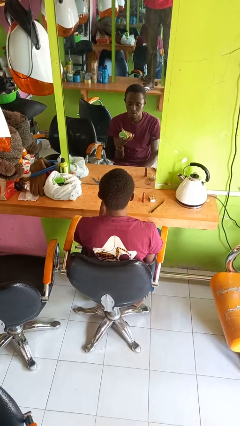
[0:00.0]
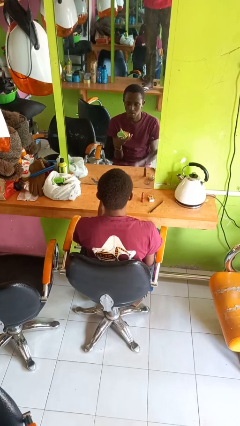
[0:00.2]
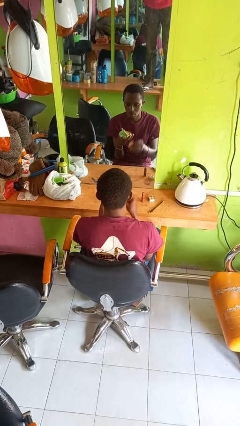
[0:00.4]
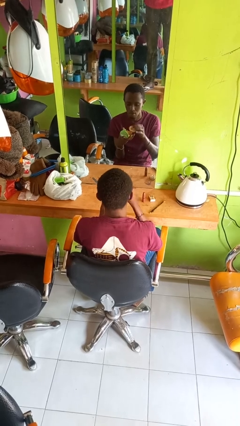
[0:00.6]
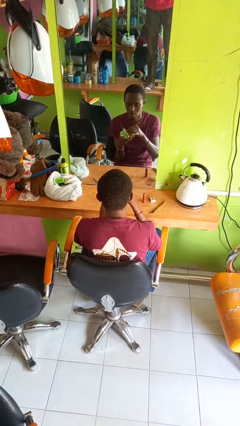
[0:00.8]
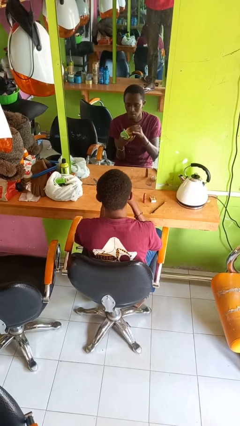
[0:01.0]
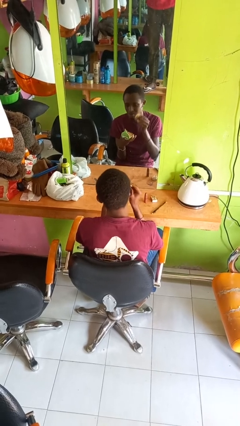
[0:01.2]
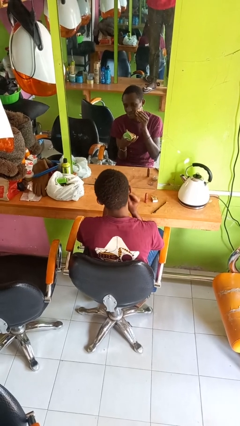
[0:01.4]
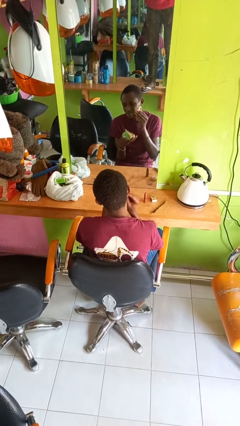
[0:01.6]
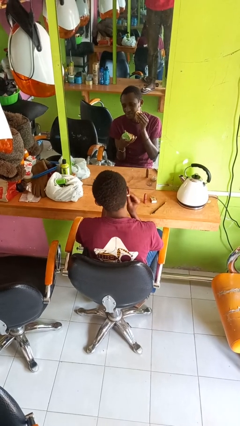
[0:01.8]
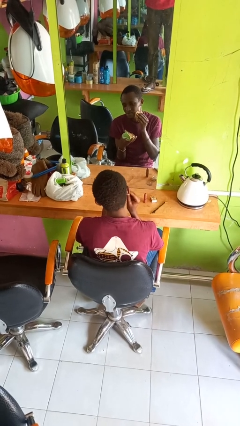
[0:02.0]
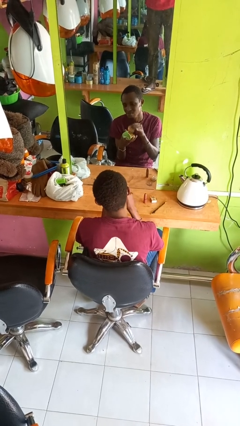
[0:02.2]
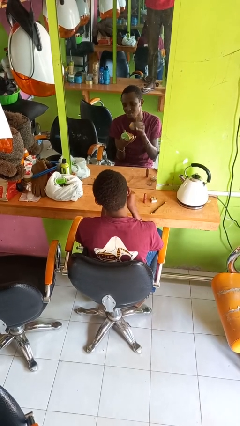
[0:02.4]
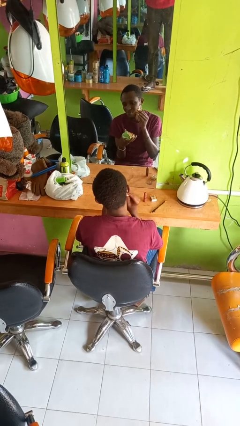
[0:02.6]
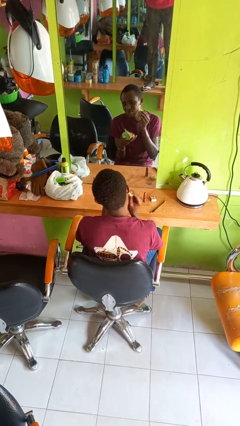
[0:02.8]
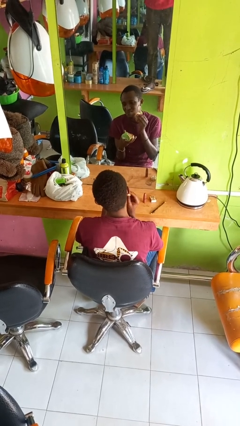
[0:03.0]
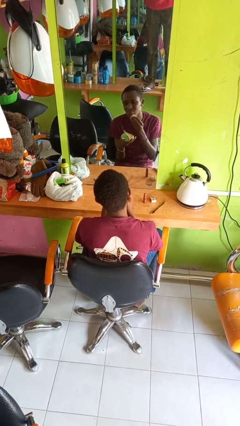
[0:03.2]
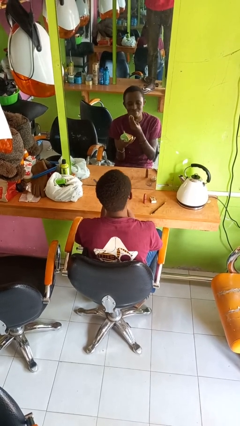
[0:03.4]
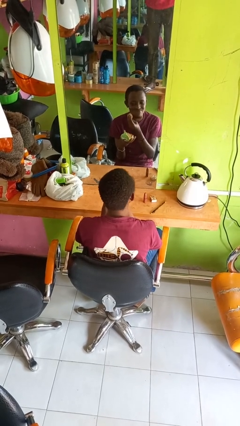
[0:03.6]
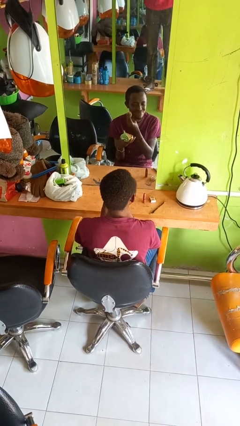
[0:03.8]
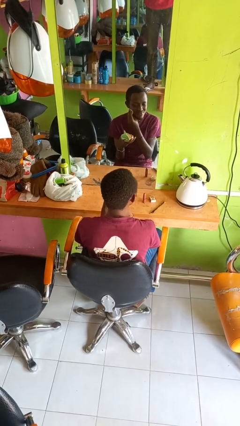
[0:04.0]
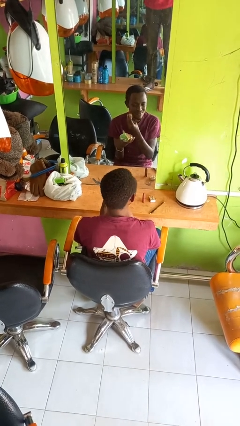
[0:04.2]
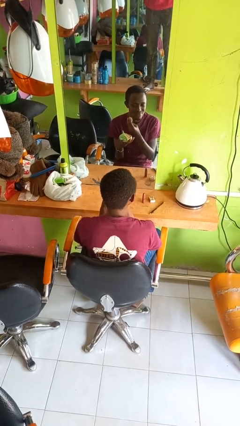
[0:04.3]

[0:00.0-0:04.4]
person applies foundation makeup

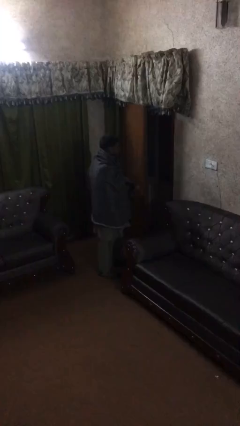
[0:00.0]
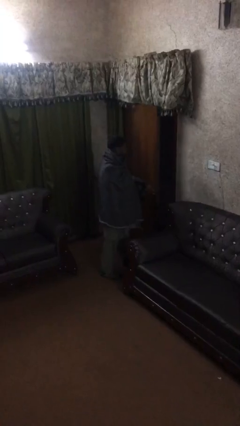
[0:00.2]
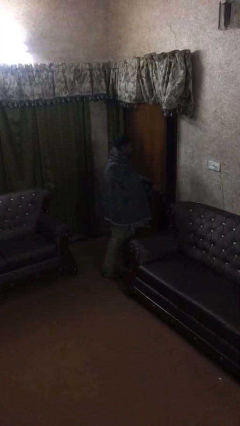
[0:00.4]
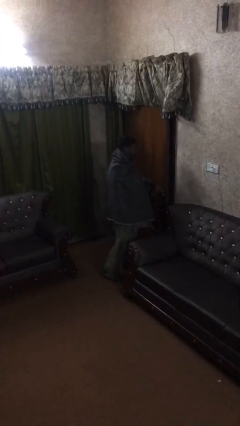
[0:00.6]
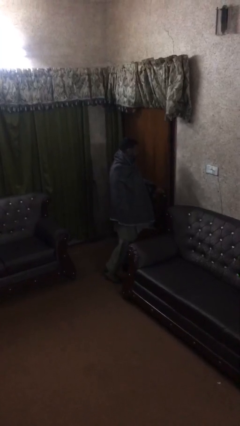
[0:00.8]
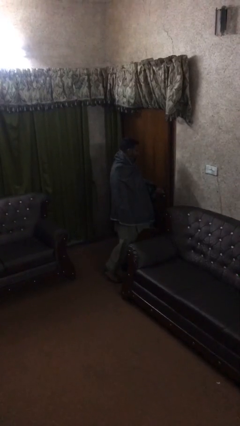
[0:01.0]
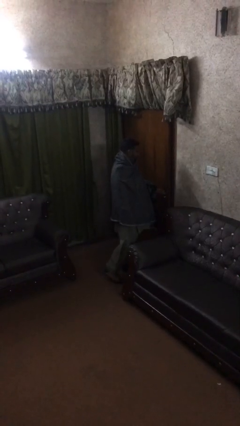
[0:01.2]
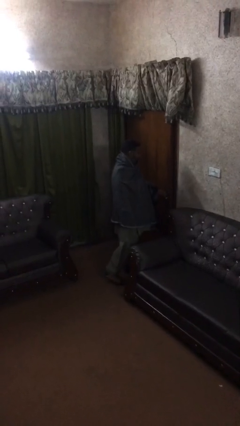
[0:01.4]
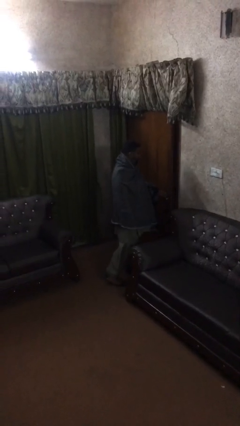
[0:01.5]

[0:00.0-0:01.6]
person closes facility door

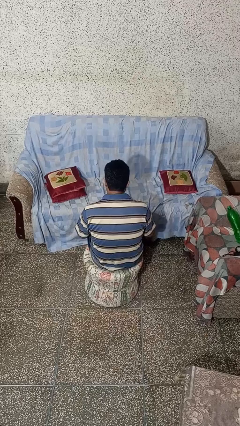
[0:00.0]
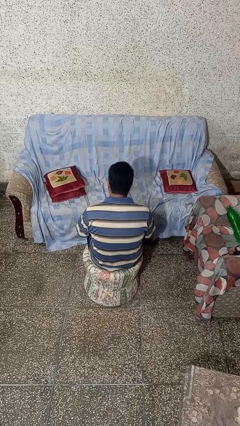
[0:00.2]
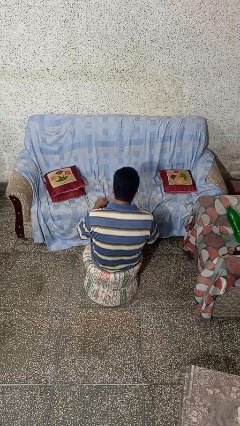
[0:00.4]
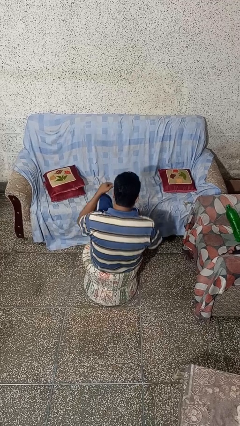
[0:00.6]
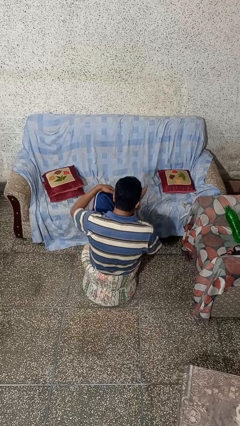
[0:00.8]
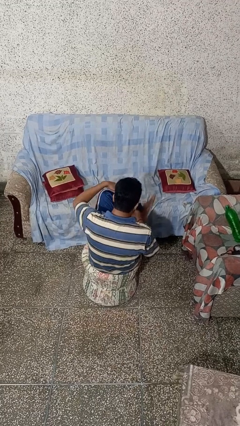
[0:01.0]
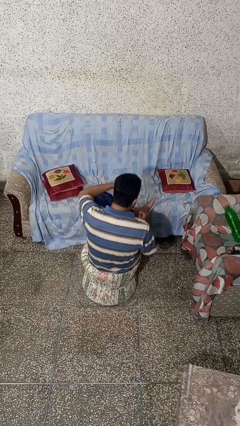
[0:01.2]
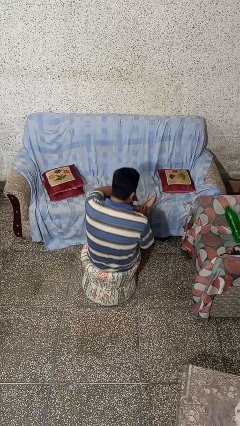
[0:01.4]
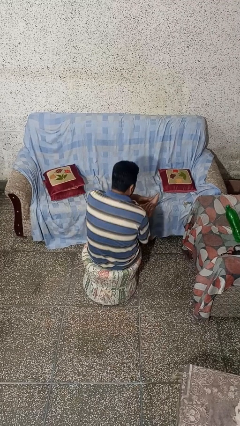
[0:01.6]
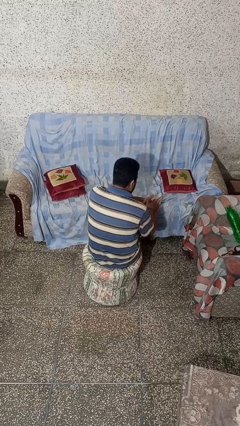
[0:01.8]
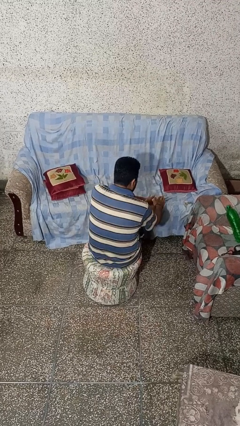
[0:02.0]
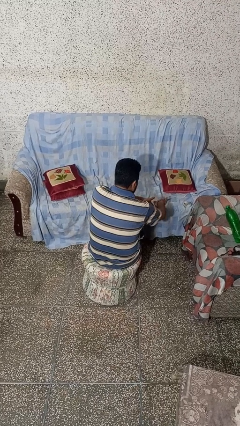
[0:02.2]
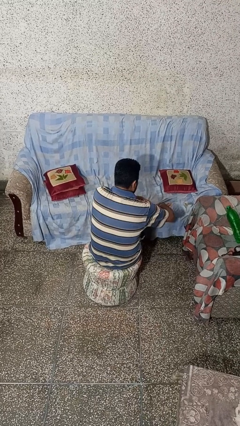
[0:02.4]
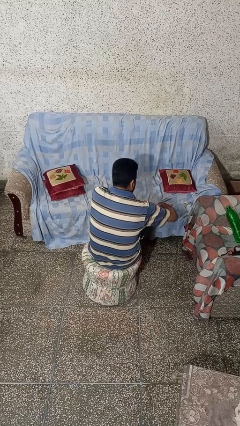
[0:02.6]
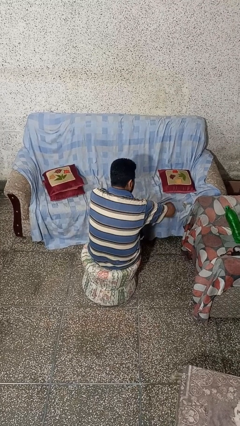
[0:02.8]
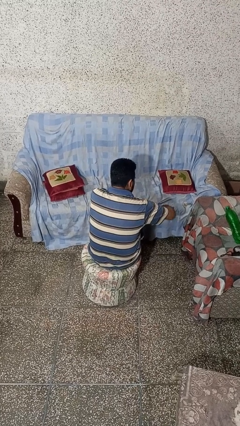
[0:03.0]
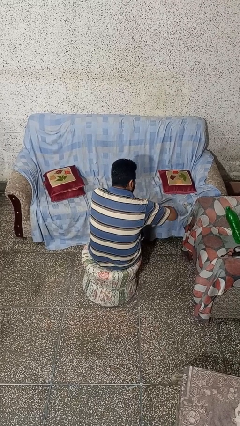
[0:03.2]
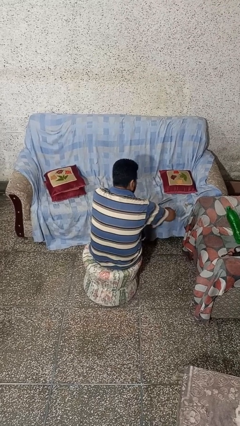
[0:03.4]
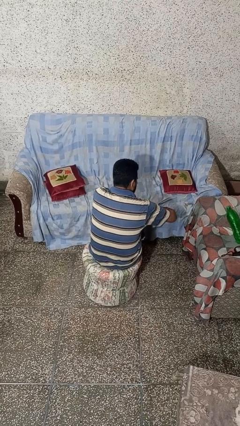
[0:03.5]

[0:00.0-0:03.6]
person rubs foot

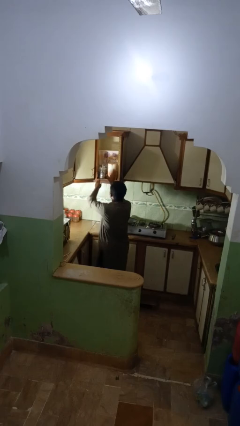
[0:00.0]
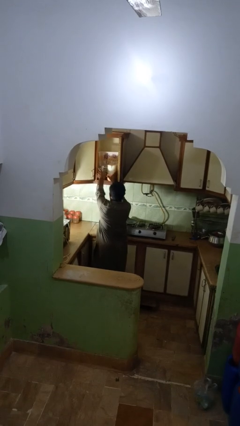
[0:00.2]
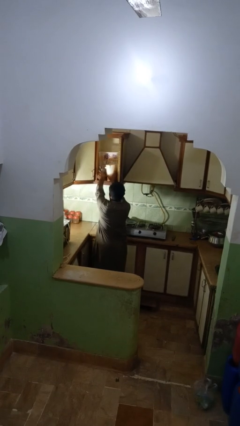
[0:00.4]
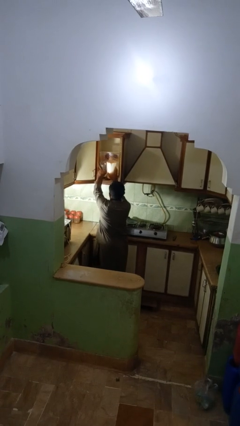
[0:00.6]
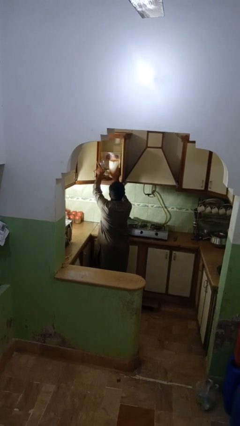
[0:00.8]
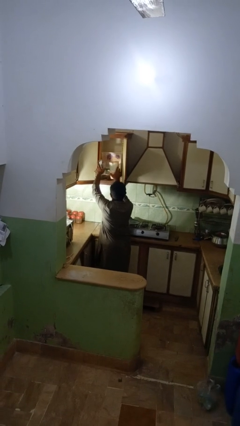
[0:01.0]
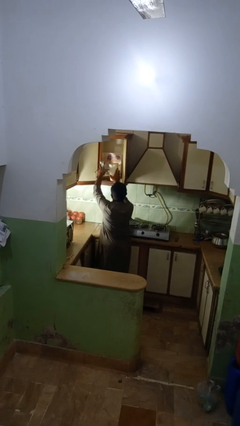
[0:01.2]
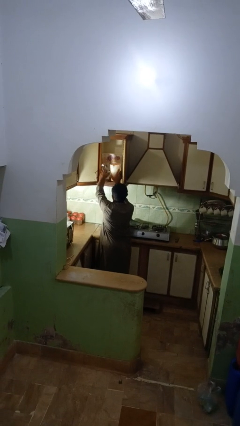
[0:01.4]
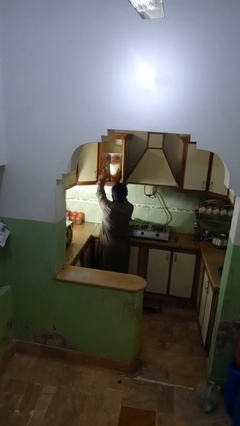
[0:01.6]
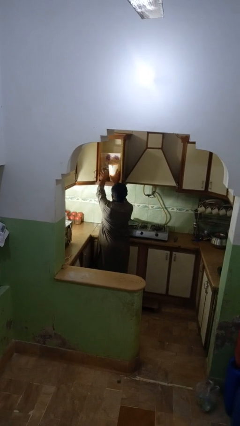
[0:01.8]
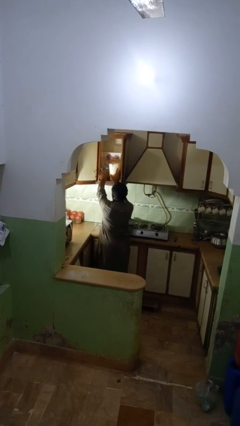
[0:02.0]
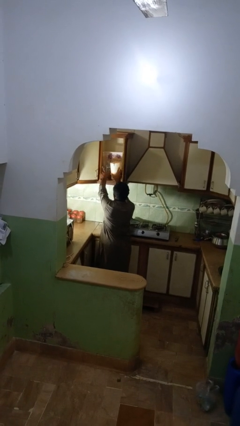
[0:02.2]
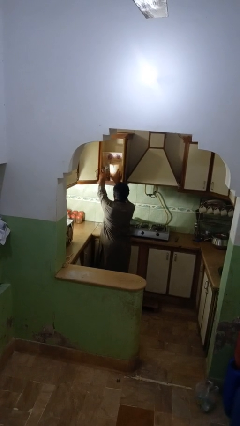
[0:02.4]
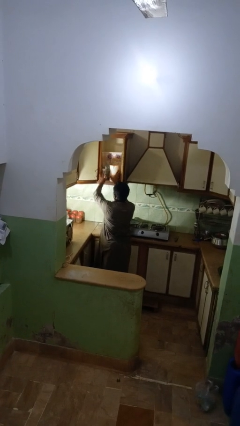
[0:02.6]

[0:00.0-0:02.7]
person searches in kitchen drawer

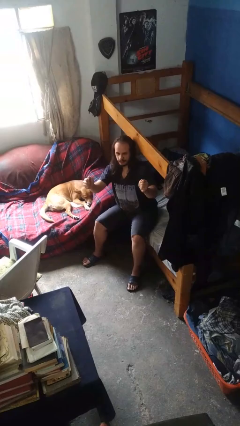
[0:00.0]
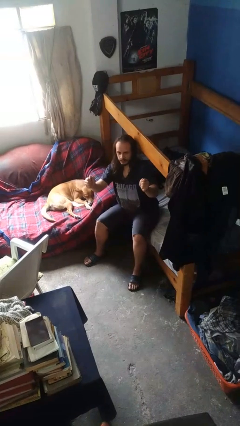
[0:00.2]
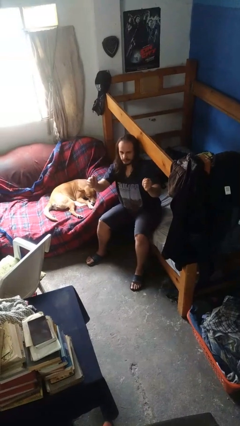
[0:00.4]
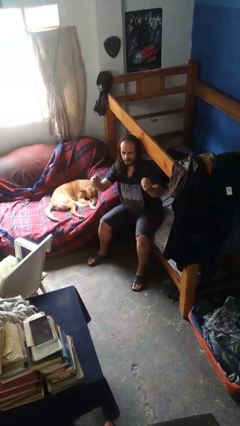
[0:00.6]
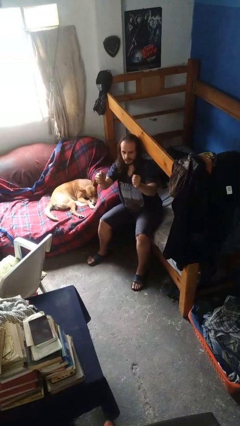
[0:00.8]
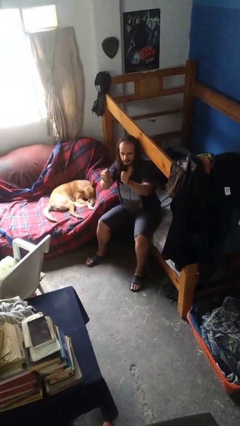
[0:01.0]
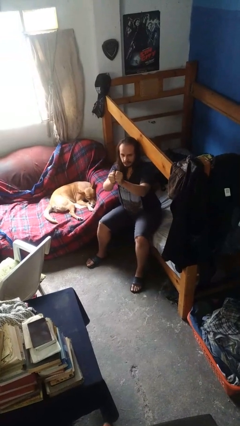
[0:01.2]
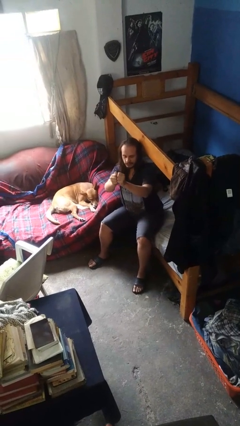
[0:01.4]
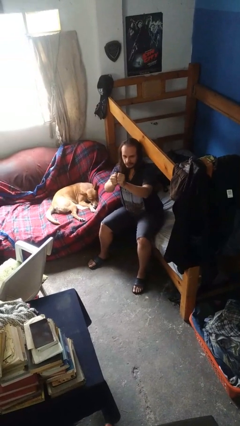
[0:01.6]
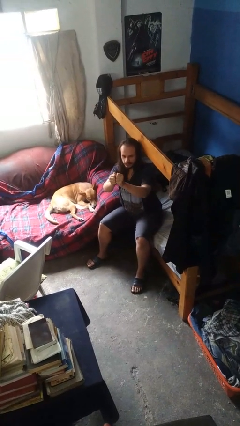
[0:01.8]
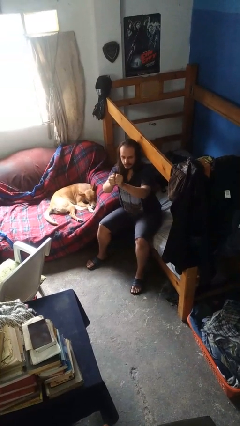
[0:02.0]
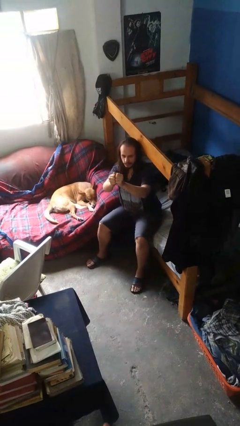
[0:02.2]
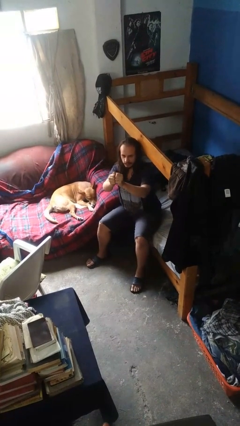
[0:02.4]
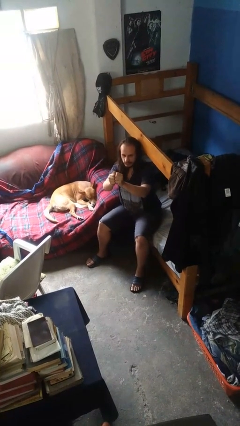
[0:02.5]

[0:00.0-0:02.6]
person gestures zoom out

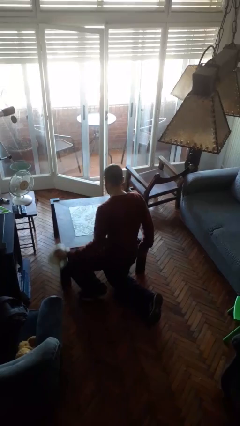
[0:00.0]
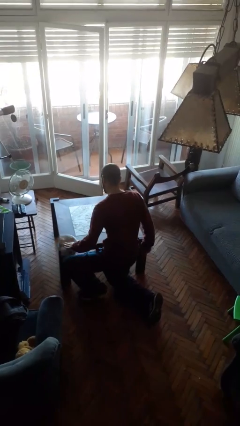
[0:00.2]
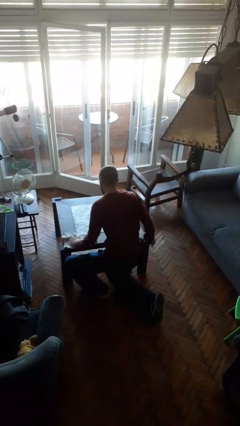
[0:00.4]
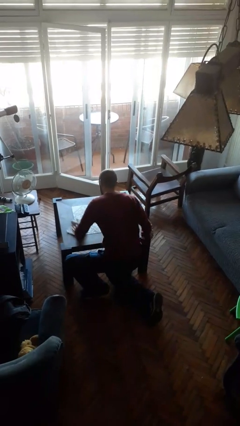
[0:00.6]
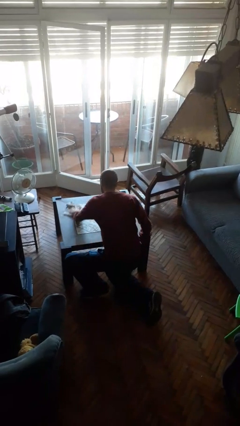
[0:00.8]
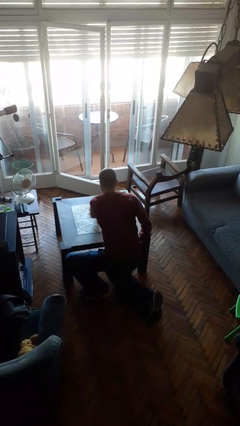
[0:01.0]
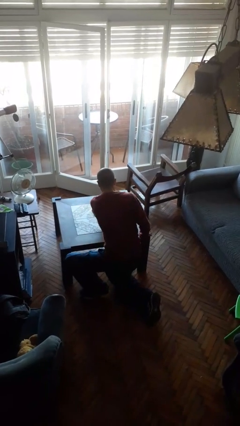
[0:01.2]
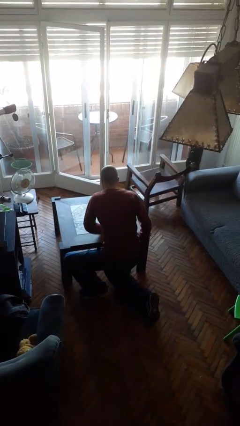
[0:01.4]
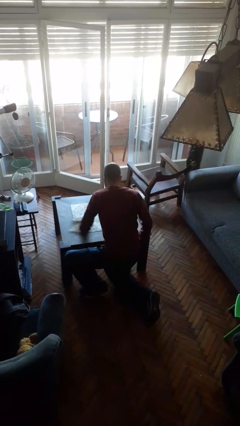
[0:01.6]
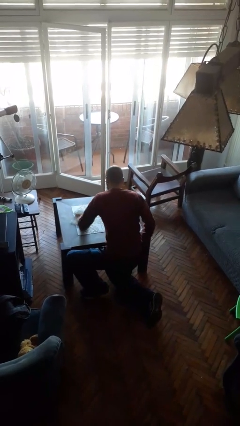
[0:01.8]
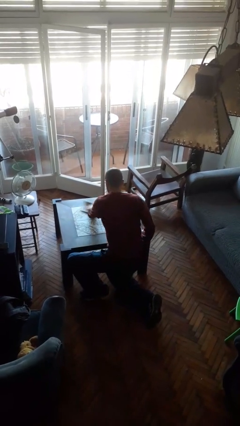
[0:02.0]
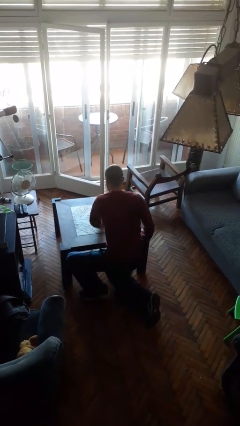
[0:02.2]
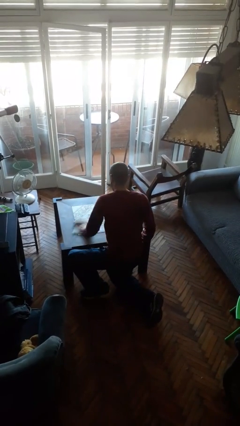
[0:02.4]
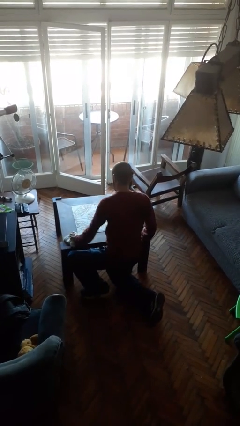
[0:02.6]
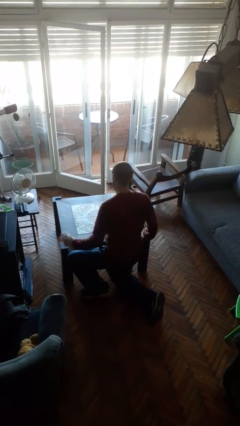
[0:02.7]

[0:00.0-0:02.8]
person cleans table with rag
